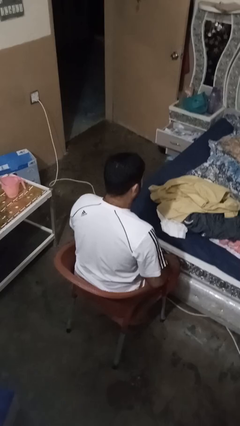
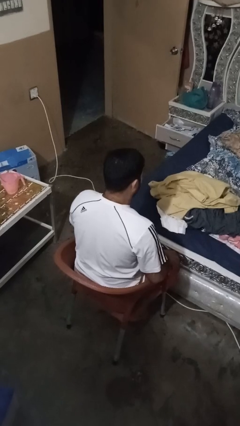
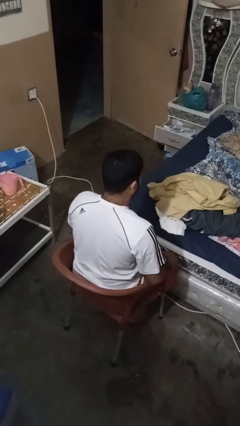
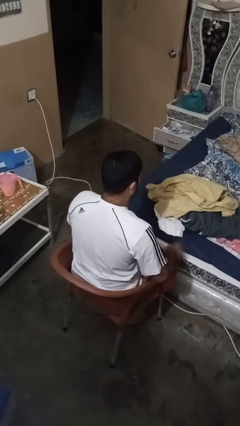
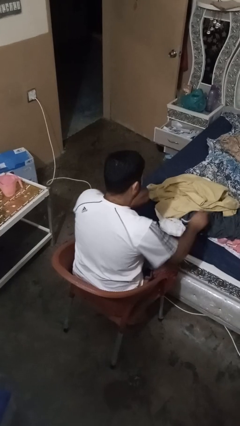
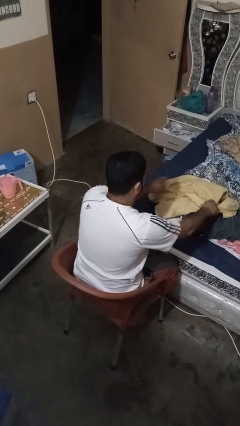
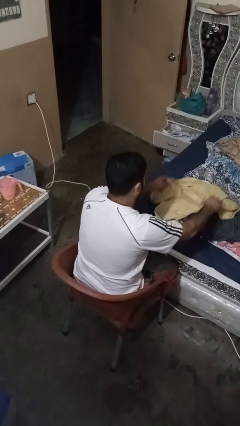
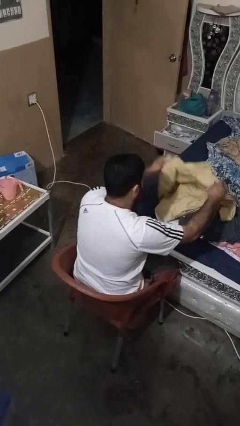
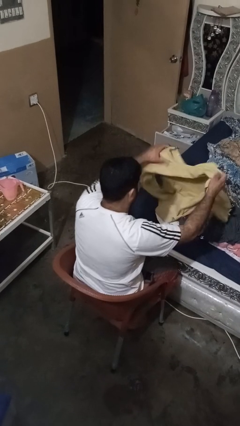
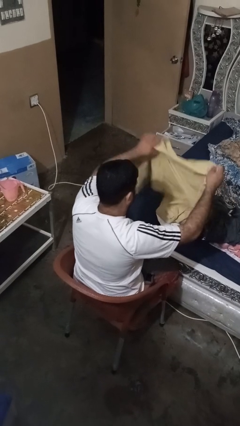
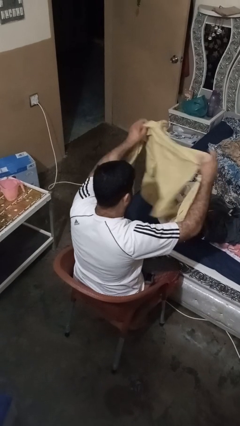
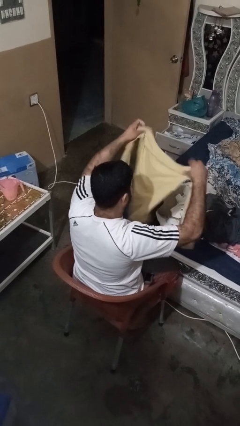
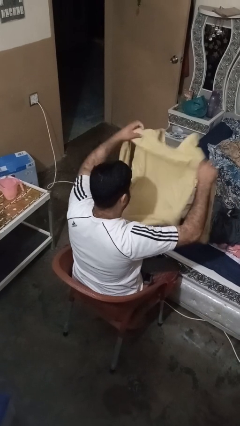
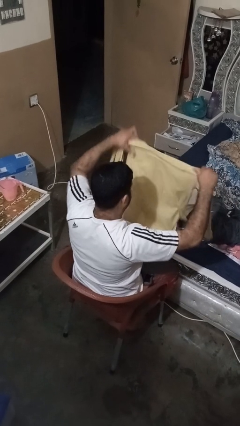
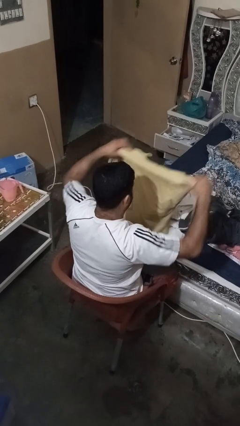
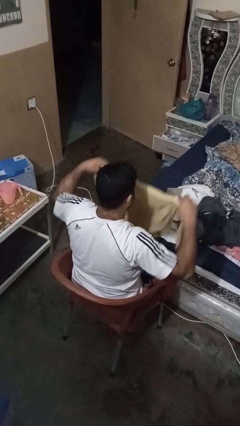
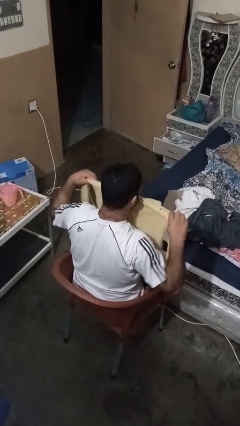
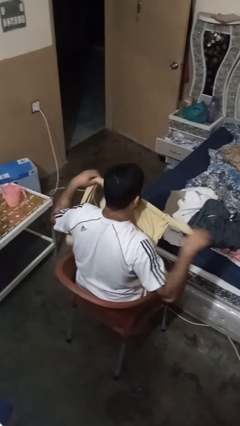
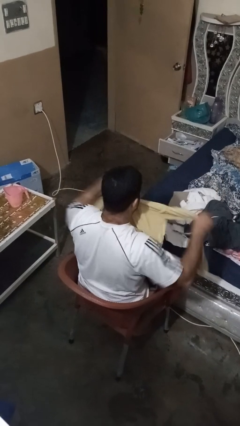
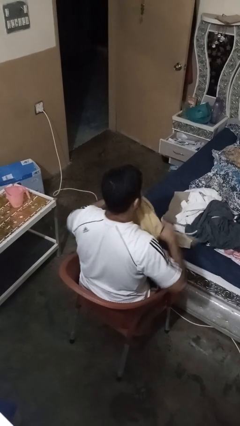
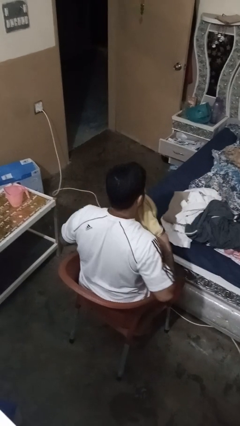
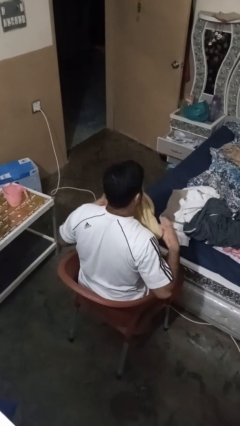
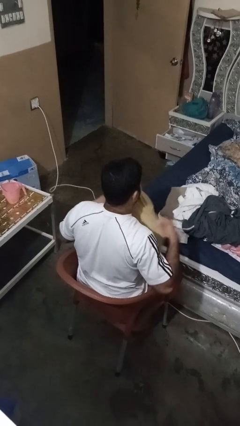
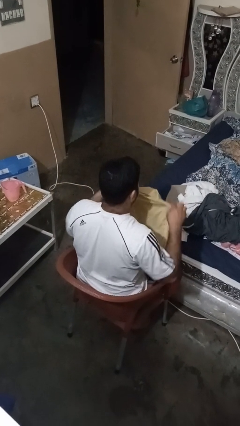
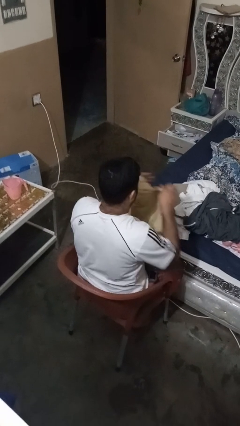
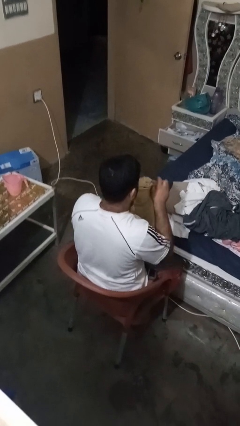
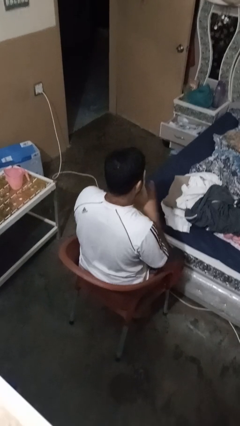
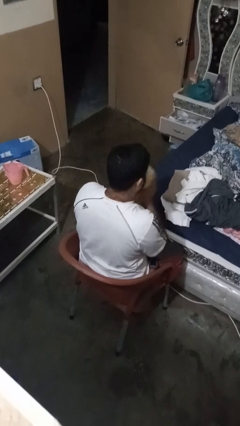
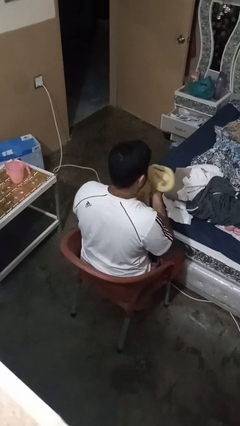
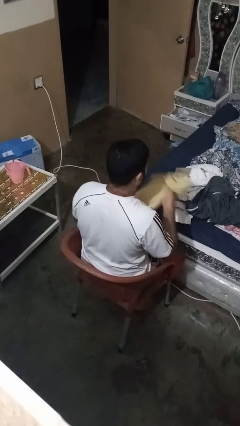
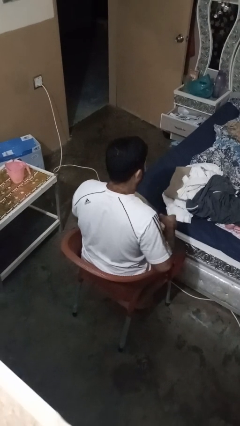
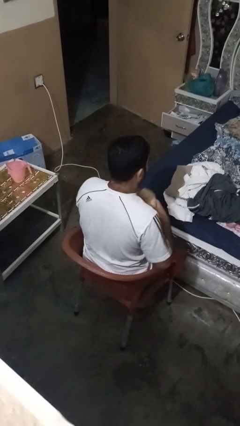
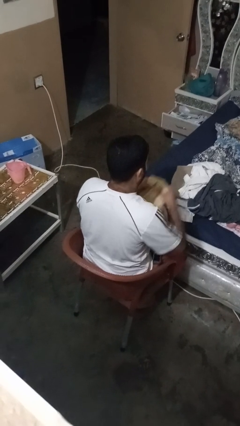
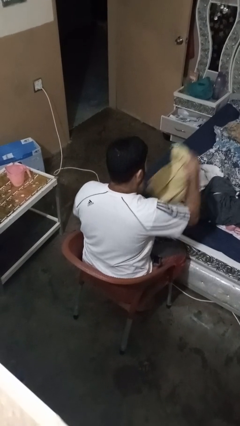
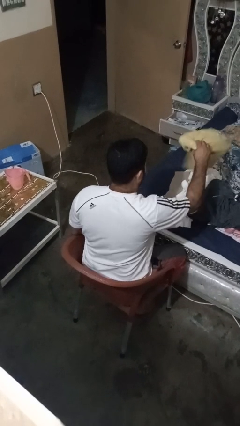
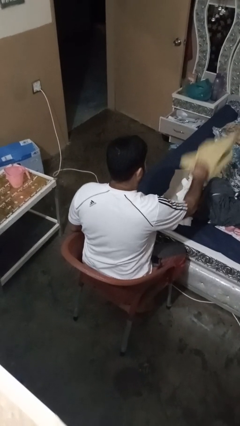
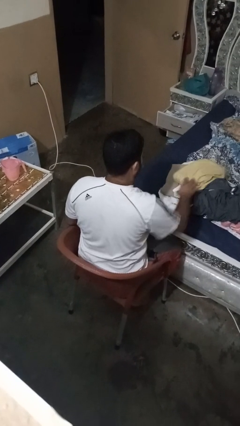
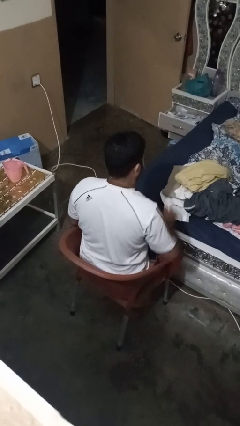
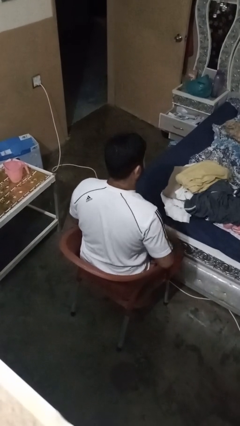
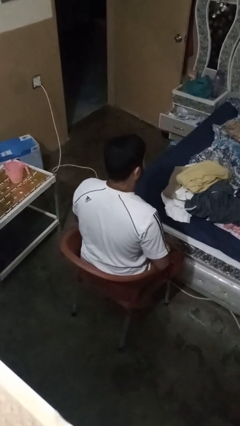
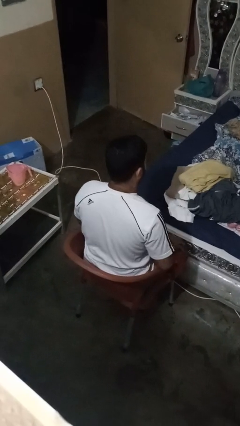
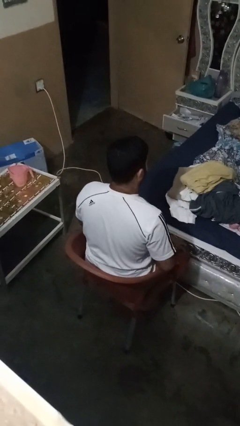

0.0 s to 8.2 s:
person folds shirt

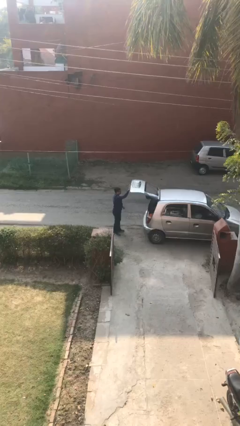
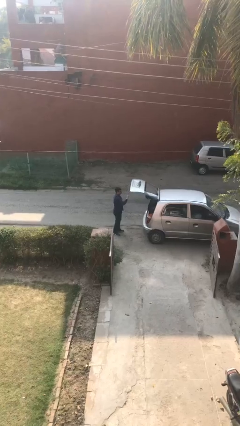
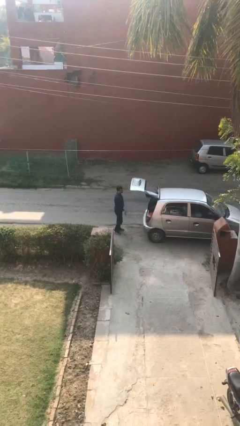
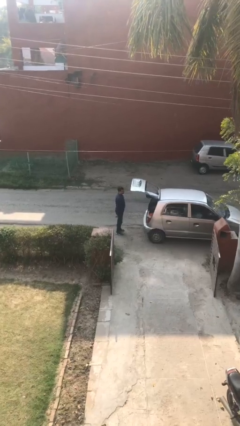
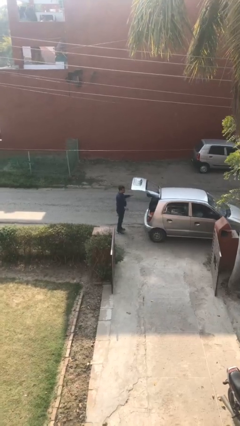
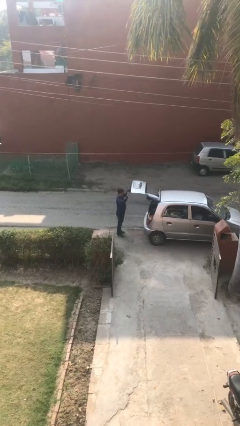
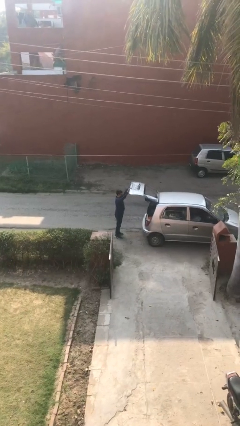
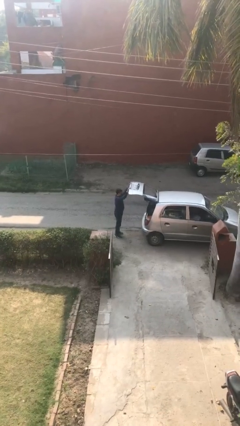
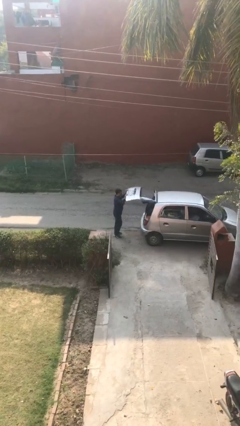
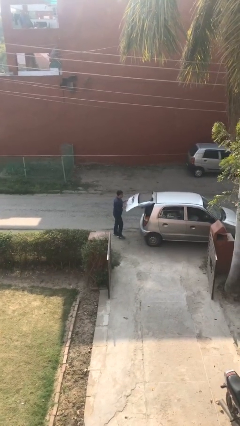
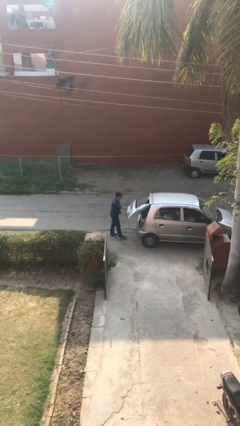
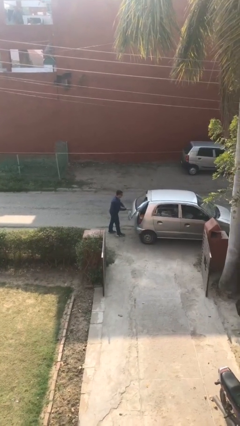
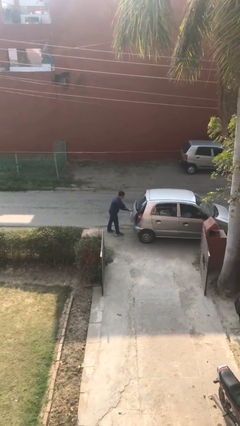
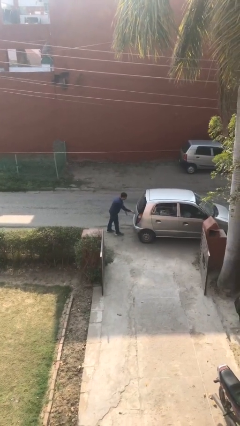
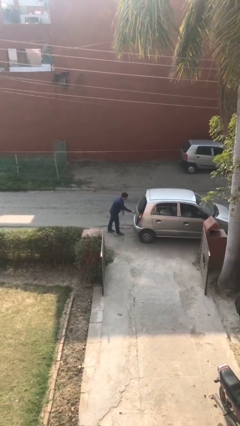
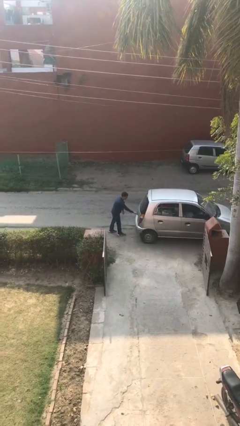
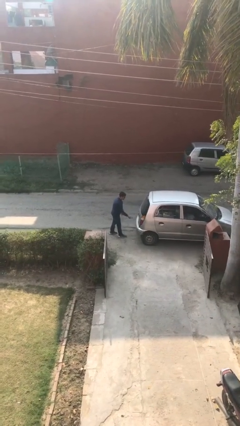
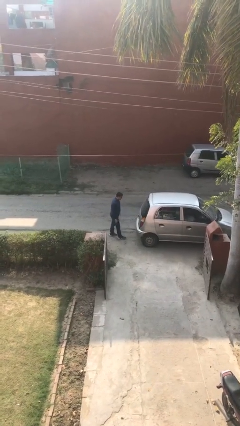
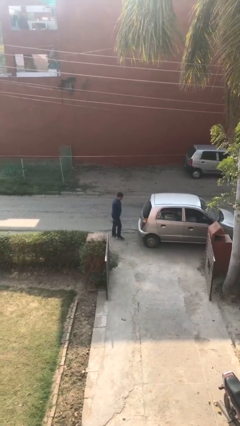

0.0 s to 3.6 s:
person closes car trunk

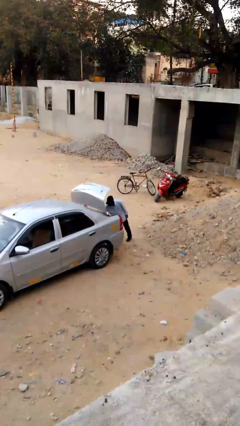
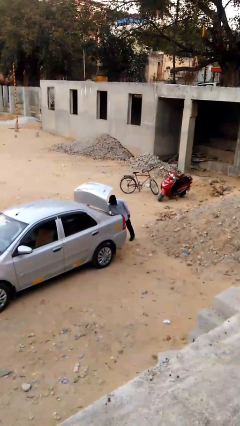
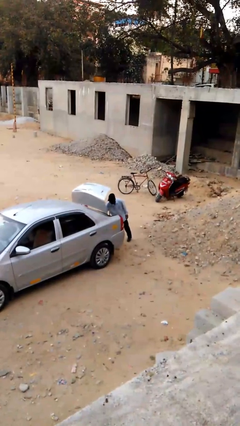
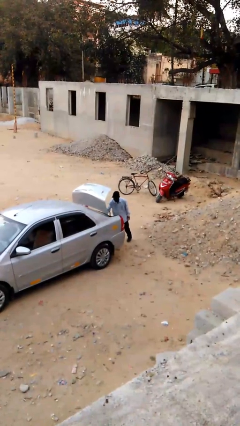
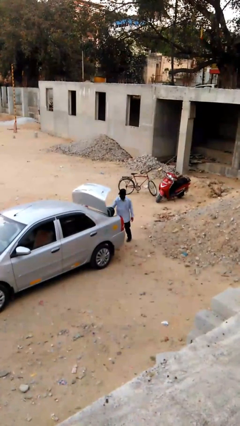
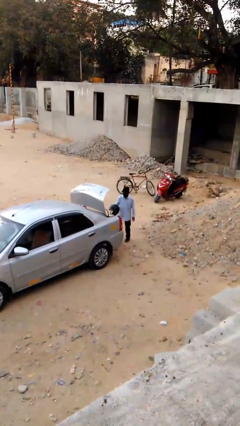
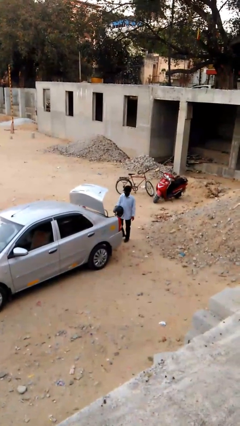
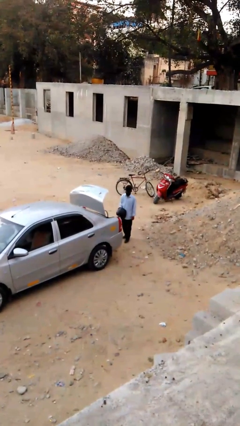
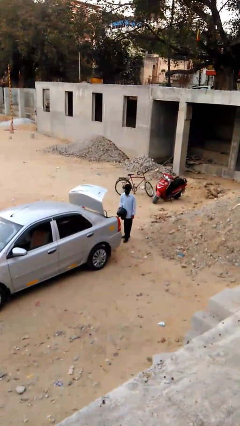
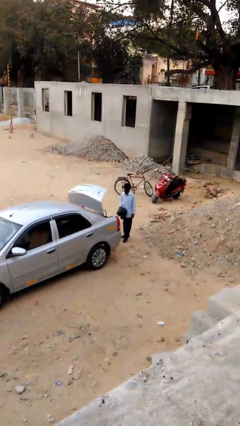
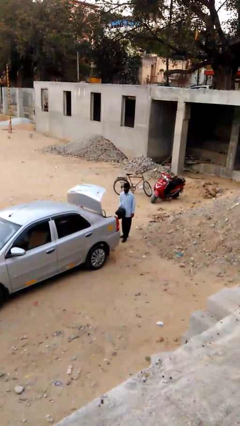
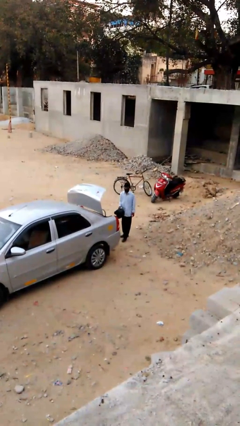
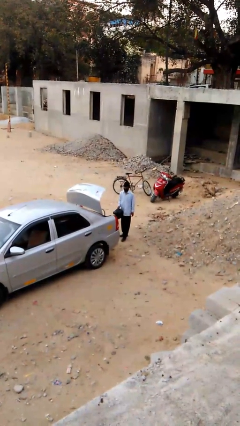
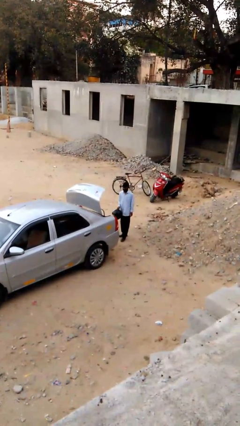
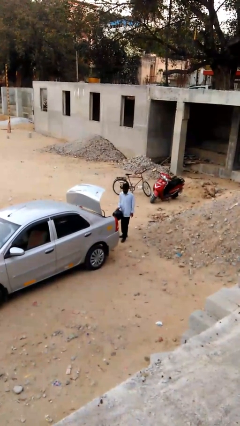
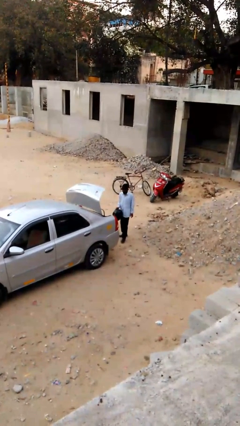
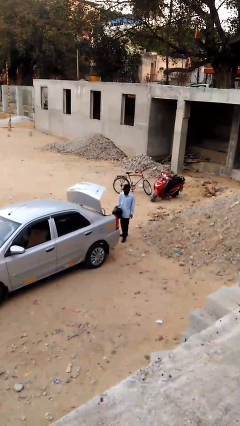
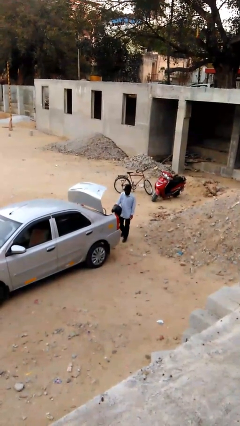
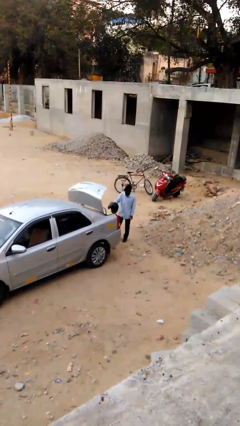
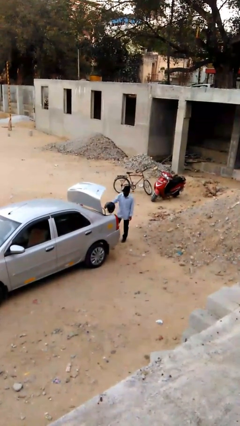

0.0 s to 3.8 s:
person unloads car

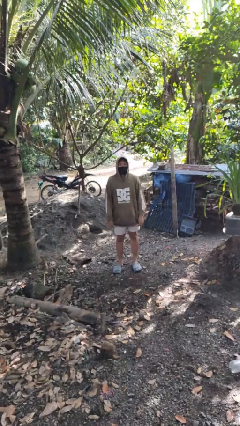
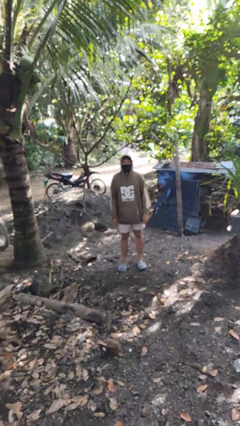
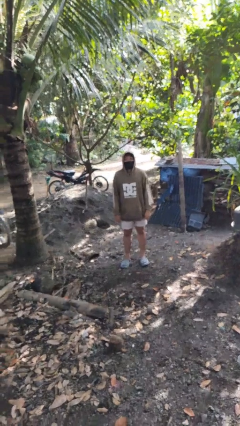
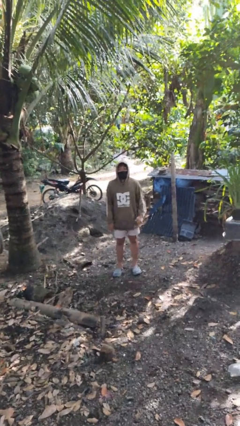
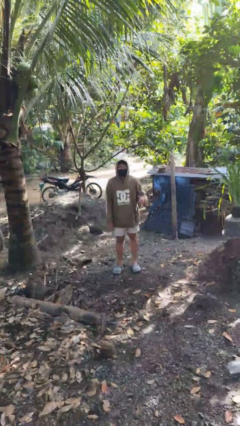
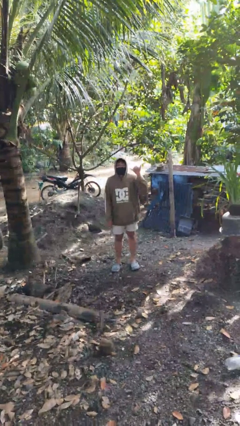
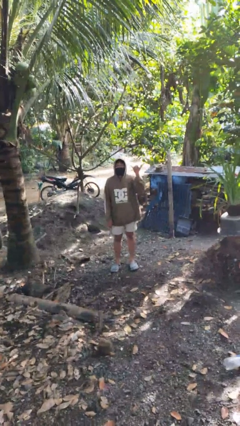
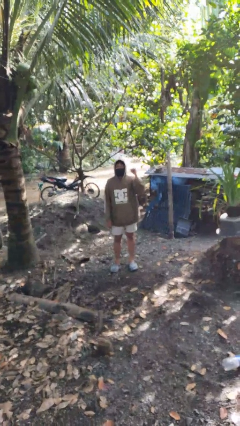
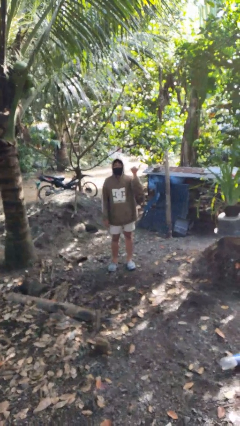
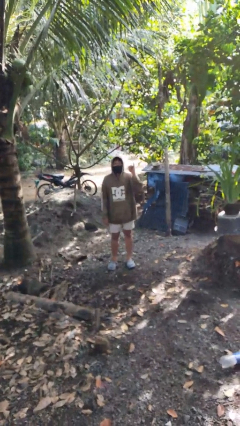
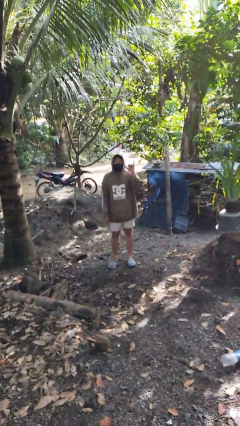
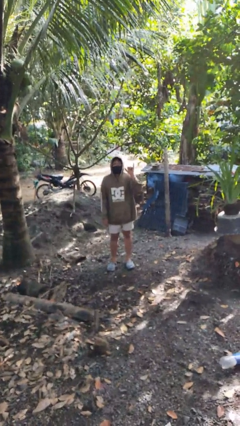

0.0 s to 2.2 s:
person gestures hang loose
